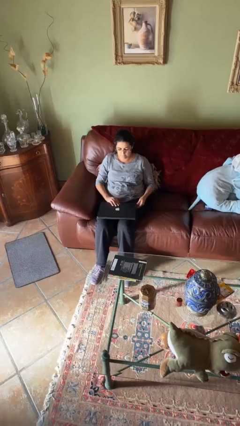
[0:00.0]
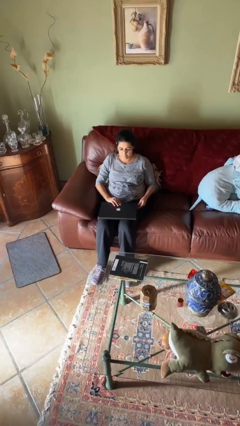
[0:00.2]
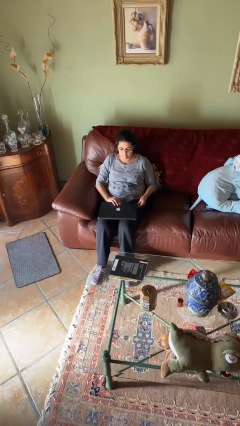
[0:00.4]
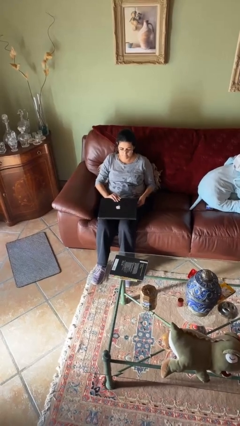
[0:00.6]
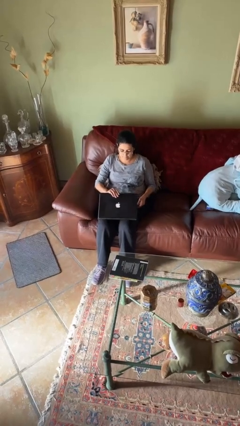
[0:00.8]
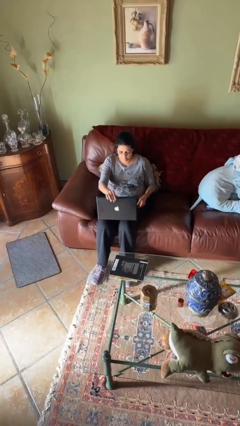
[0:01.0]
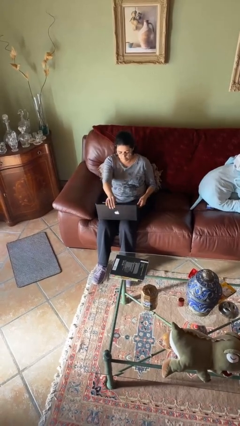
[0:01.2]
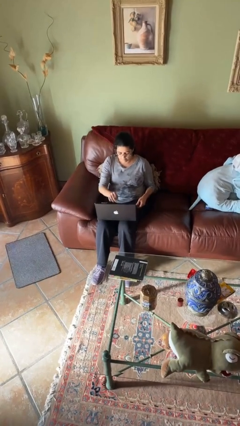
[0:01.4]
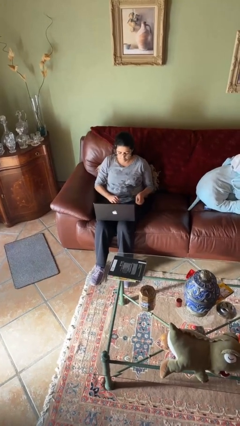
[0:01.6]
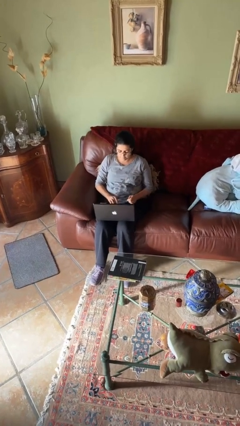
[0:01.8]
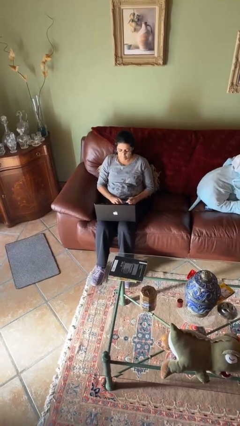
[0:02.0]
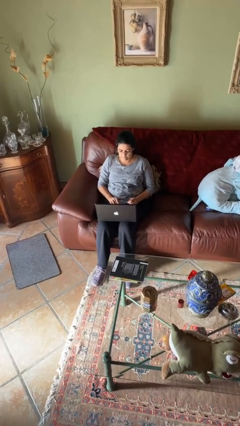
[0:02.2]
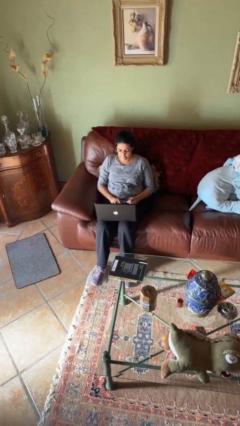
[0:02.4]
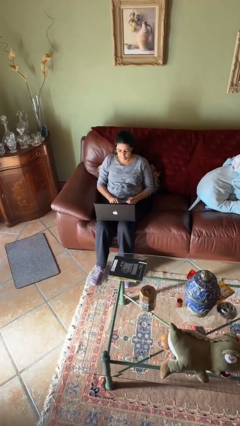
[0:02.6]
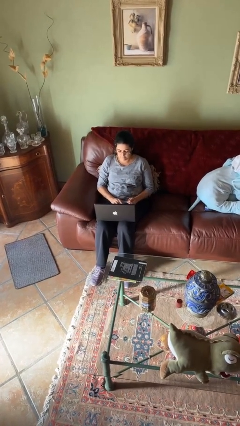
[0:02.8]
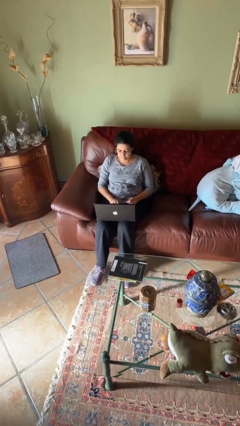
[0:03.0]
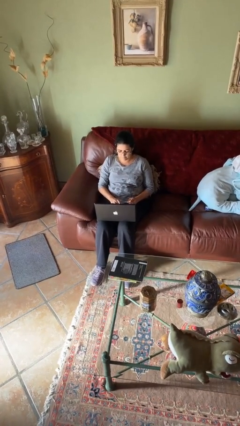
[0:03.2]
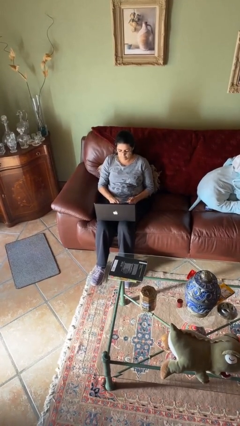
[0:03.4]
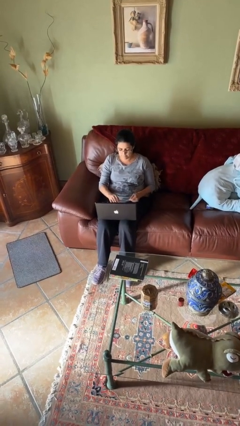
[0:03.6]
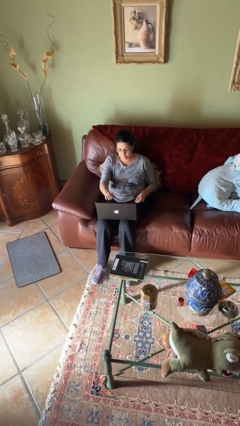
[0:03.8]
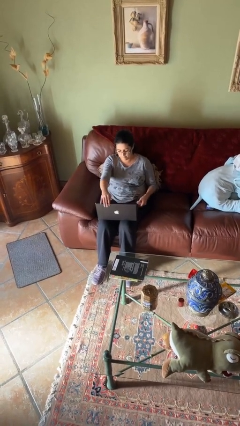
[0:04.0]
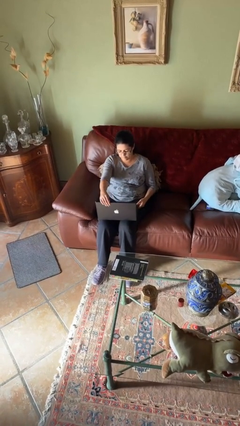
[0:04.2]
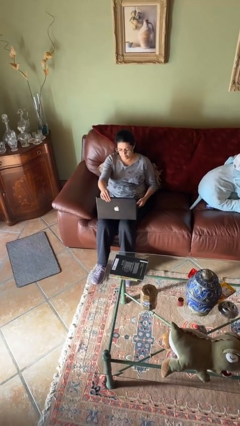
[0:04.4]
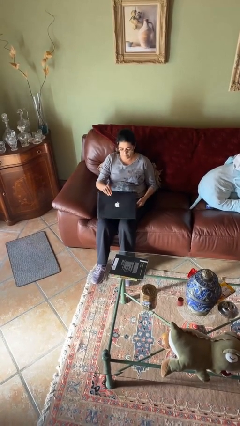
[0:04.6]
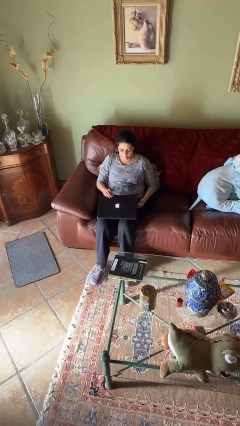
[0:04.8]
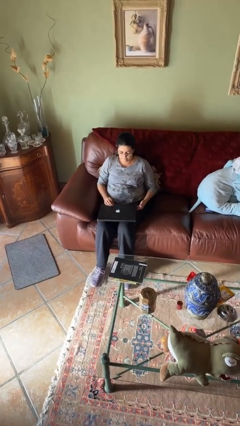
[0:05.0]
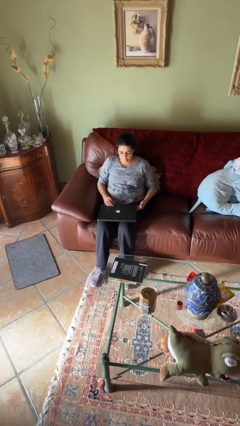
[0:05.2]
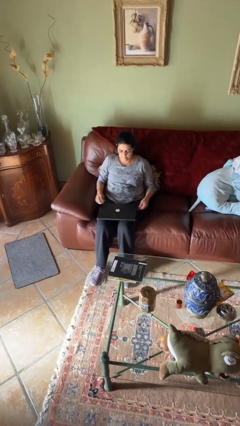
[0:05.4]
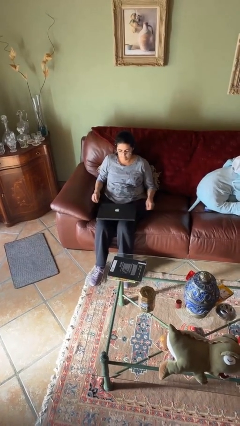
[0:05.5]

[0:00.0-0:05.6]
person interacts with laptop

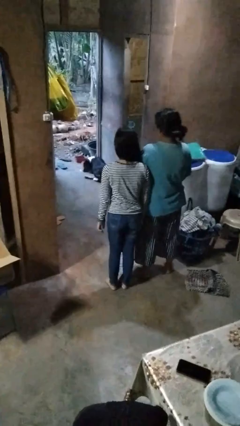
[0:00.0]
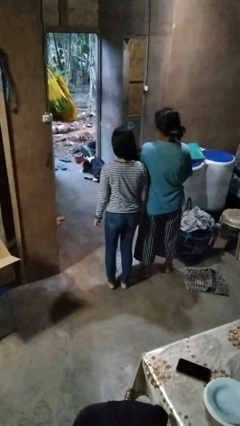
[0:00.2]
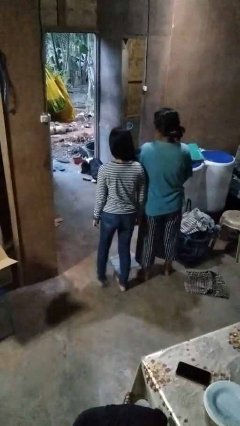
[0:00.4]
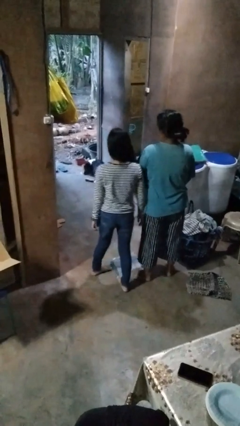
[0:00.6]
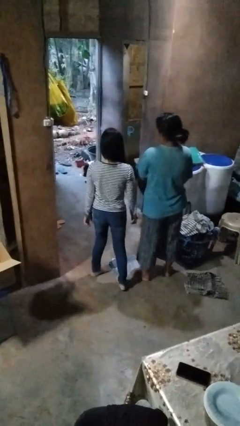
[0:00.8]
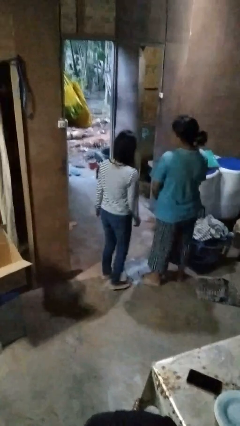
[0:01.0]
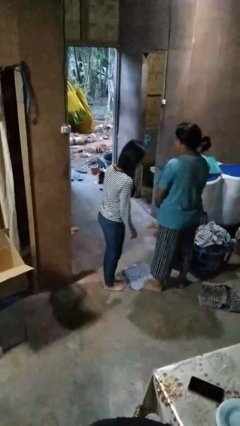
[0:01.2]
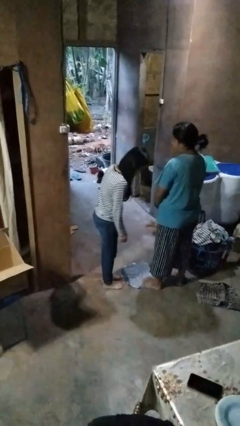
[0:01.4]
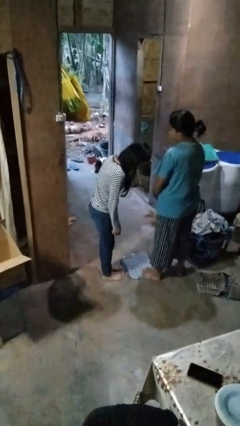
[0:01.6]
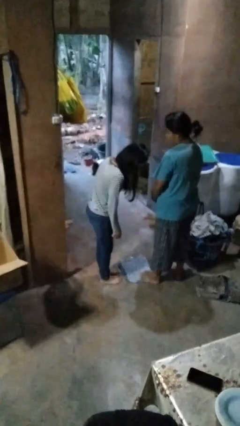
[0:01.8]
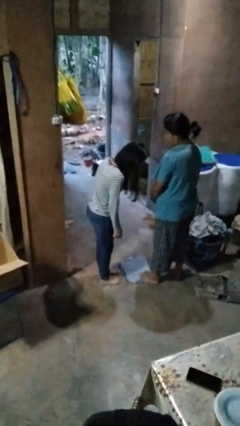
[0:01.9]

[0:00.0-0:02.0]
person bumps into person

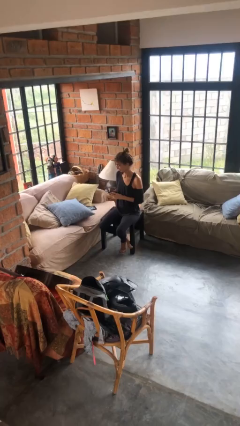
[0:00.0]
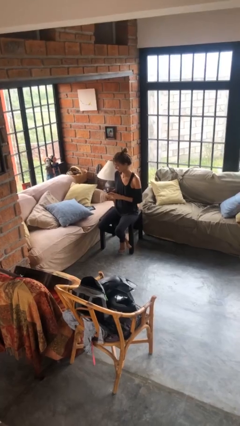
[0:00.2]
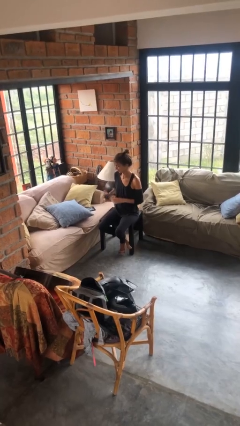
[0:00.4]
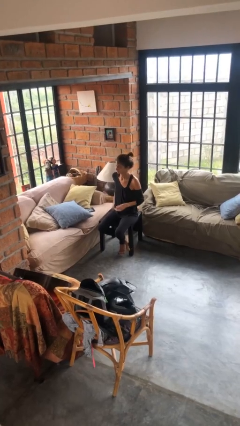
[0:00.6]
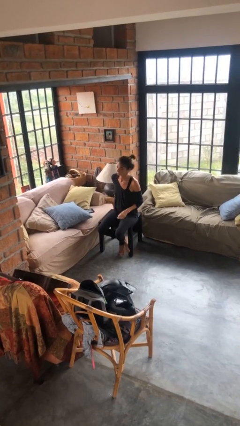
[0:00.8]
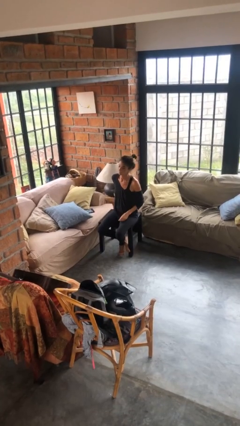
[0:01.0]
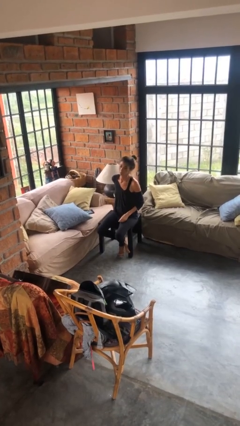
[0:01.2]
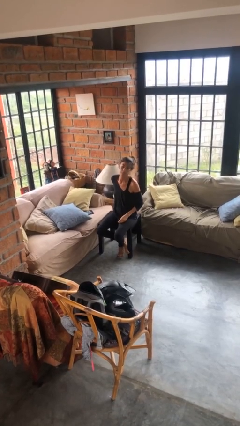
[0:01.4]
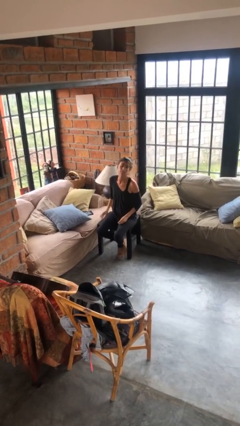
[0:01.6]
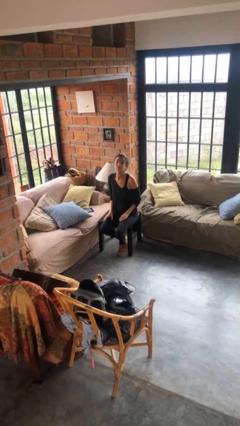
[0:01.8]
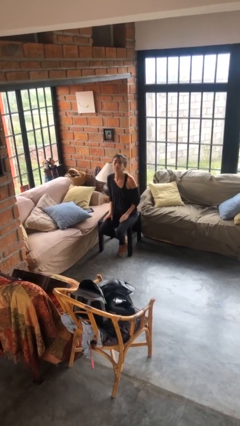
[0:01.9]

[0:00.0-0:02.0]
person puts phone into pocket

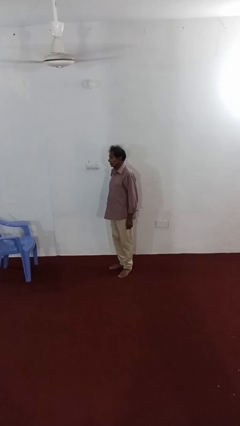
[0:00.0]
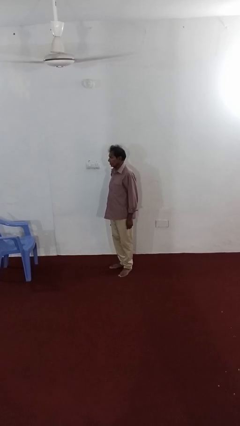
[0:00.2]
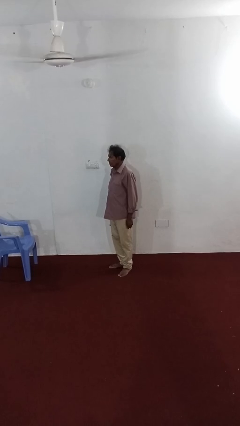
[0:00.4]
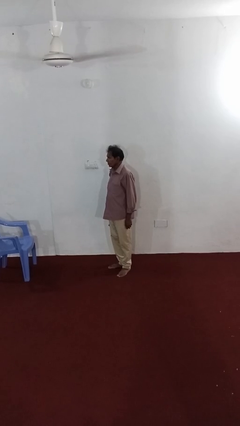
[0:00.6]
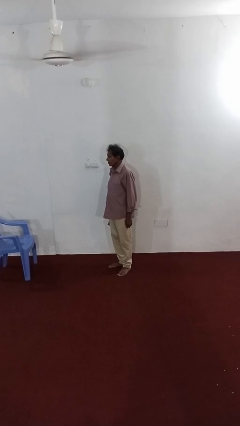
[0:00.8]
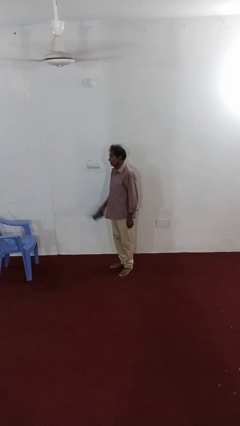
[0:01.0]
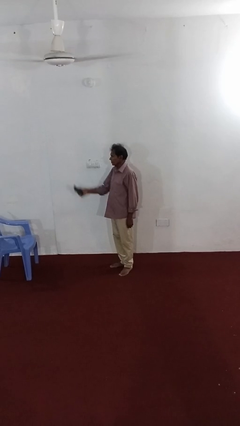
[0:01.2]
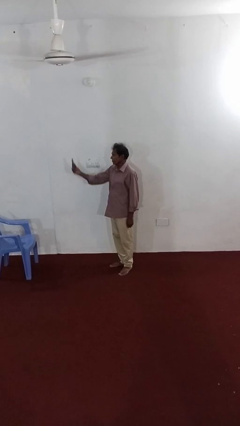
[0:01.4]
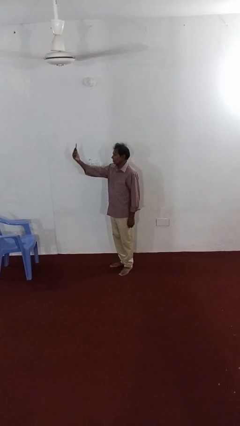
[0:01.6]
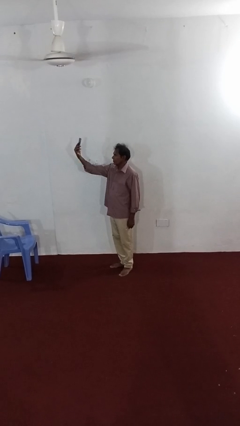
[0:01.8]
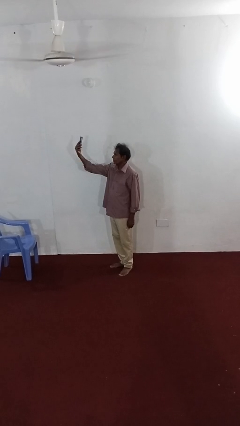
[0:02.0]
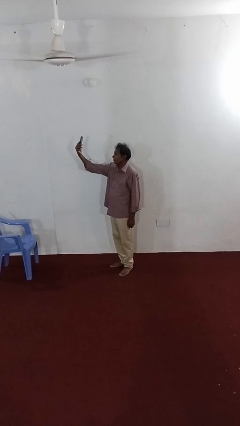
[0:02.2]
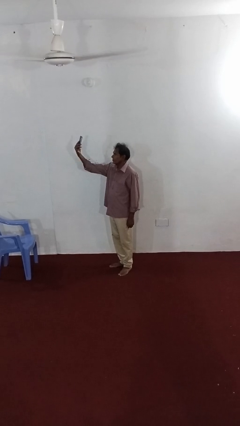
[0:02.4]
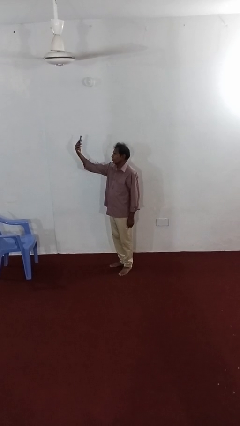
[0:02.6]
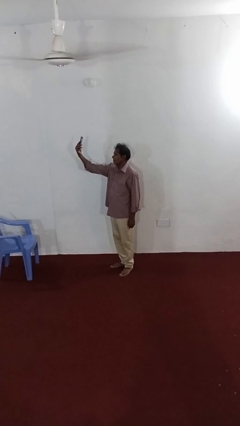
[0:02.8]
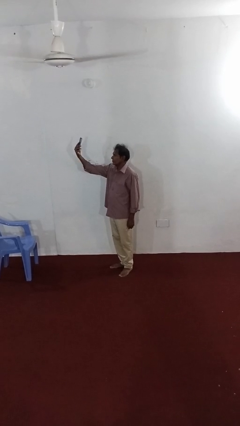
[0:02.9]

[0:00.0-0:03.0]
person takes selfie

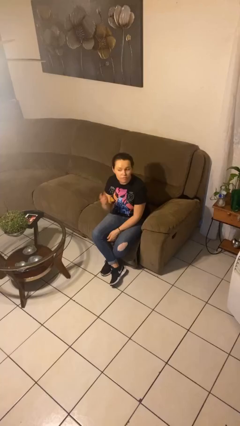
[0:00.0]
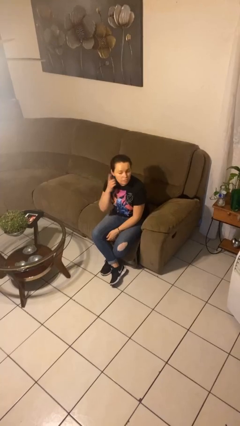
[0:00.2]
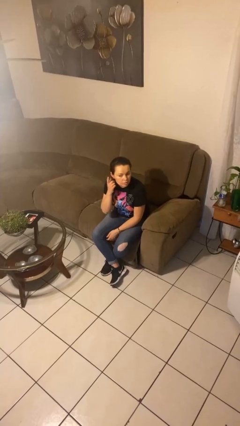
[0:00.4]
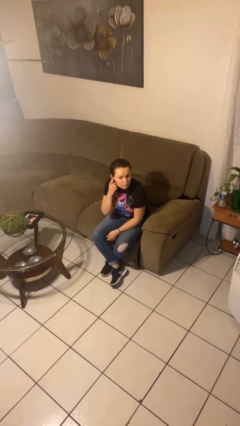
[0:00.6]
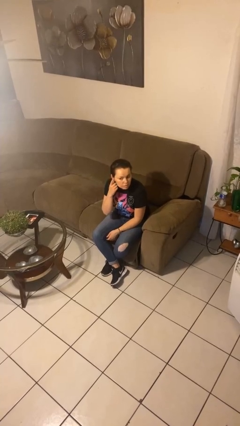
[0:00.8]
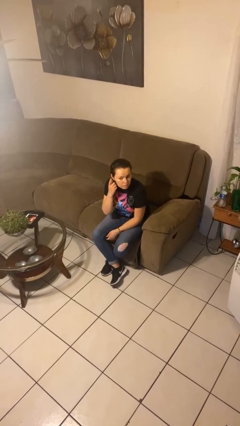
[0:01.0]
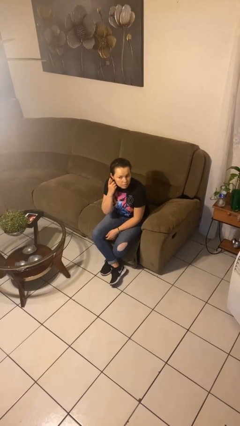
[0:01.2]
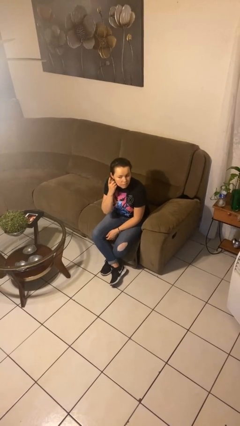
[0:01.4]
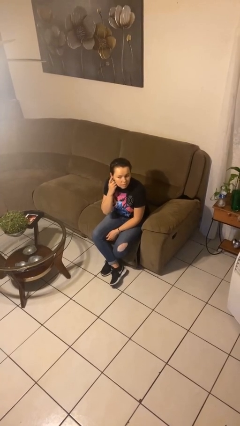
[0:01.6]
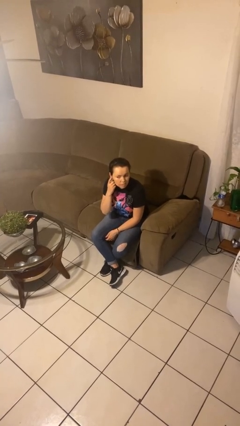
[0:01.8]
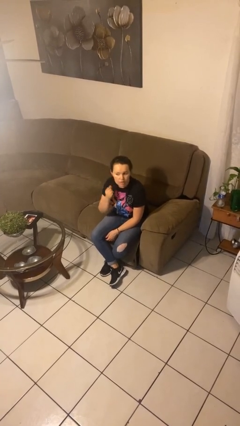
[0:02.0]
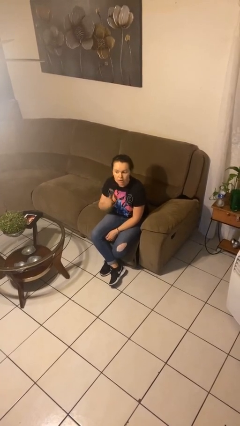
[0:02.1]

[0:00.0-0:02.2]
person gestures listen closely

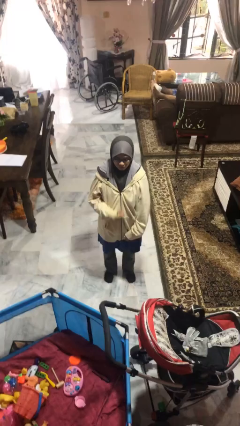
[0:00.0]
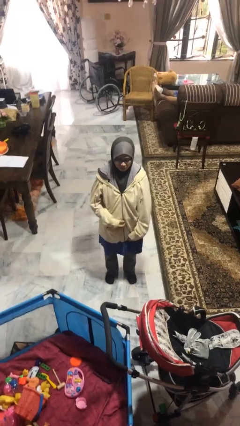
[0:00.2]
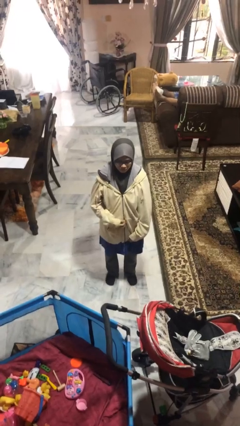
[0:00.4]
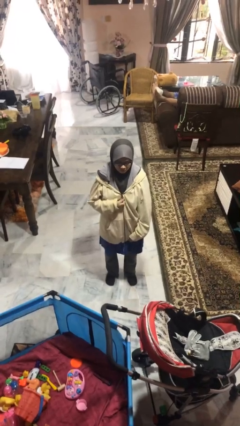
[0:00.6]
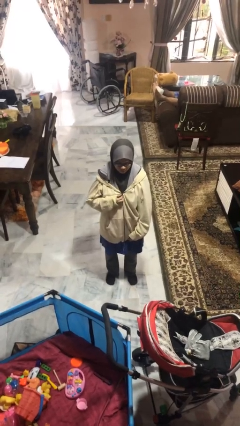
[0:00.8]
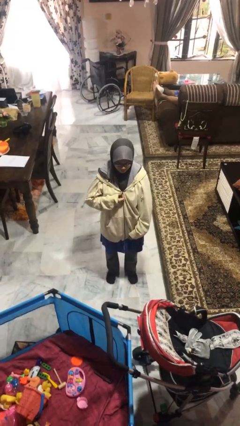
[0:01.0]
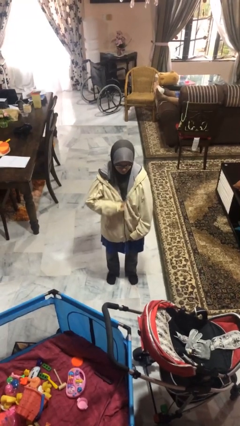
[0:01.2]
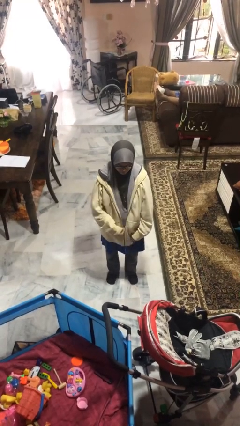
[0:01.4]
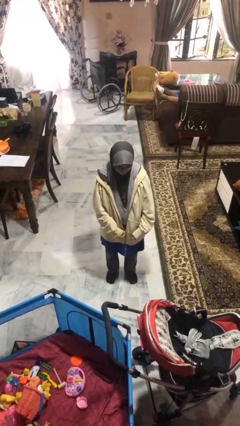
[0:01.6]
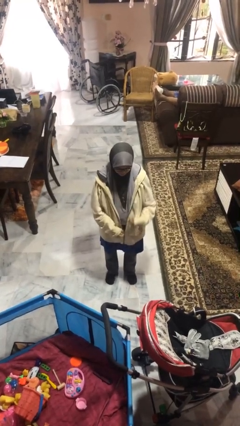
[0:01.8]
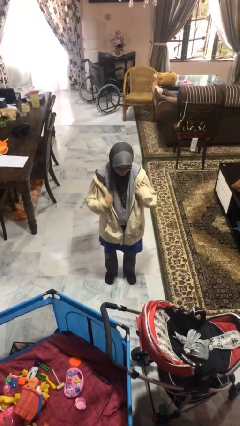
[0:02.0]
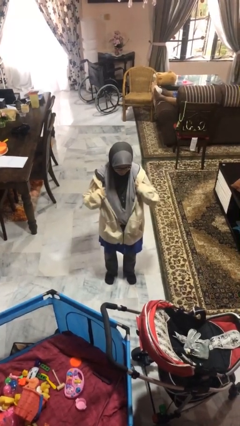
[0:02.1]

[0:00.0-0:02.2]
person unzips jacket

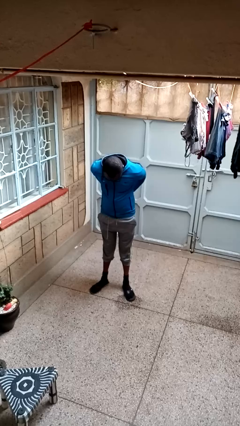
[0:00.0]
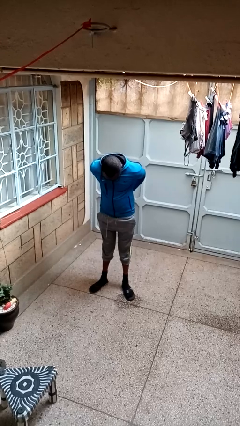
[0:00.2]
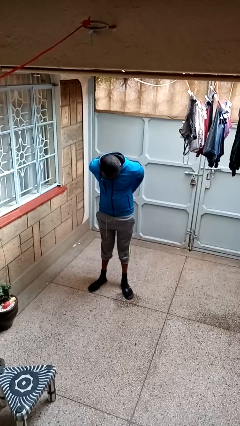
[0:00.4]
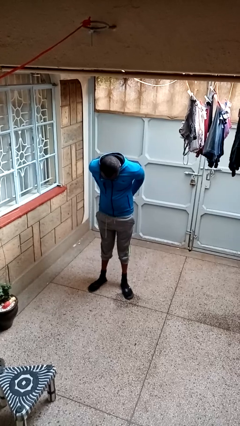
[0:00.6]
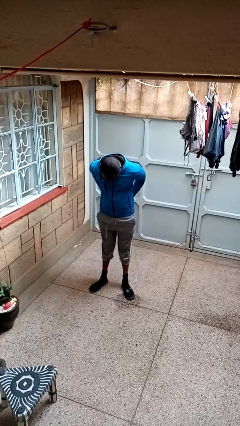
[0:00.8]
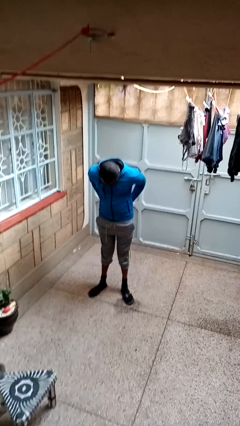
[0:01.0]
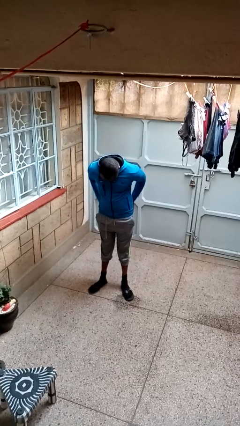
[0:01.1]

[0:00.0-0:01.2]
person puts hands in back pockets
